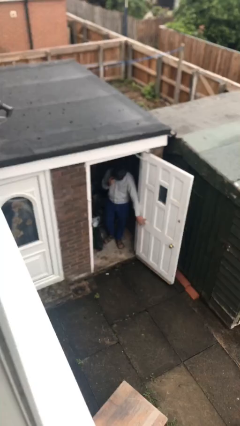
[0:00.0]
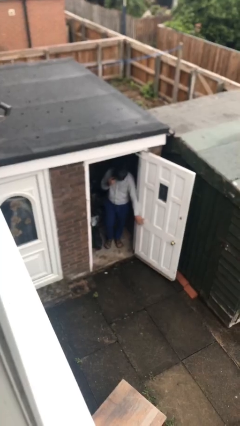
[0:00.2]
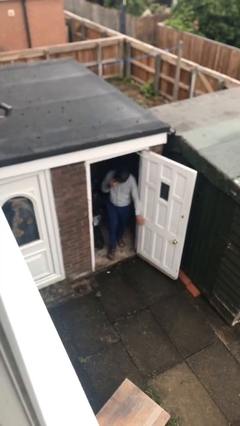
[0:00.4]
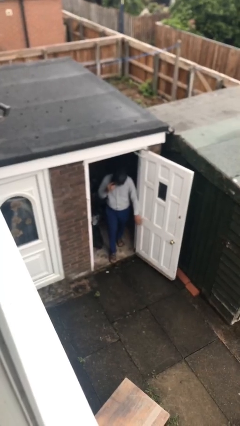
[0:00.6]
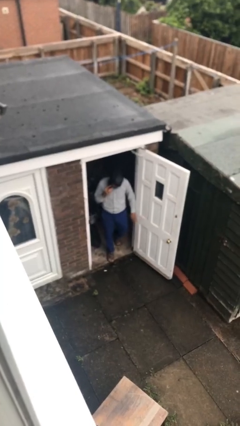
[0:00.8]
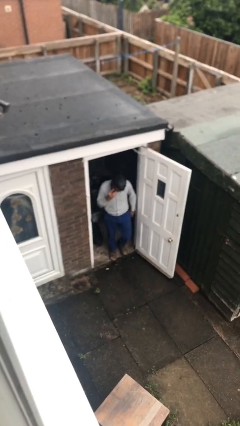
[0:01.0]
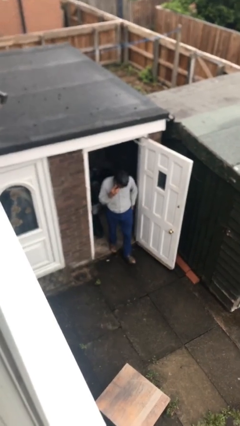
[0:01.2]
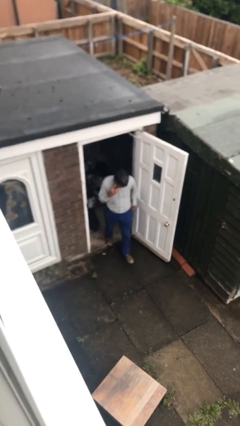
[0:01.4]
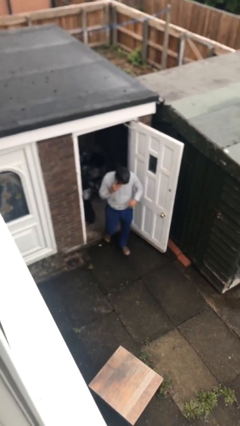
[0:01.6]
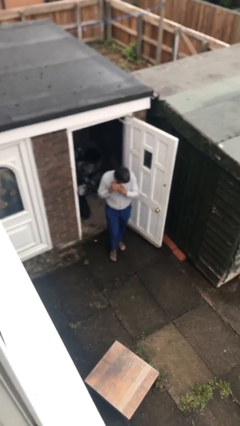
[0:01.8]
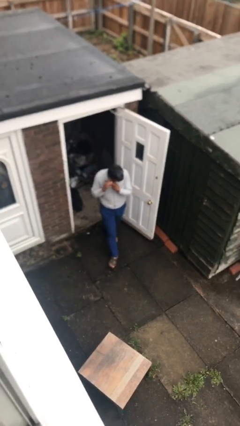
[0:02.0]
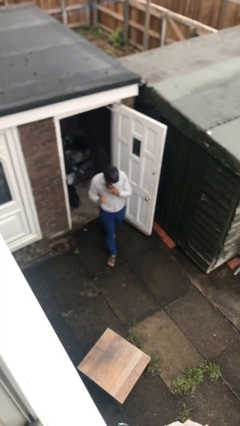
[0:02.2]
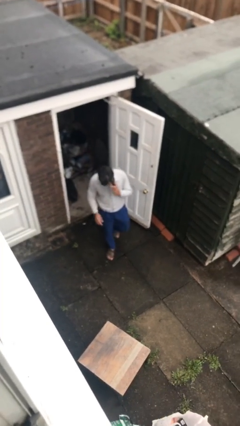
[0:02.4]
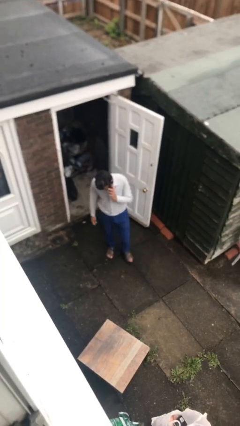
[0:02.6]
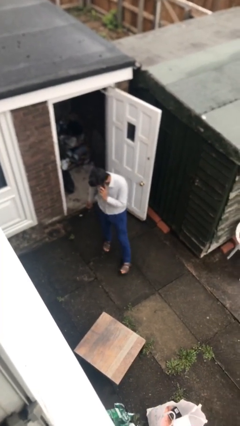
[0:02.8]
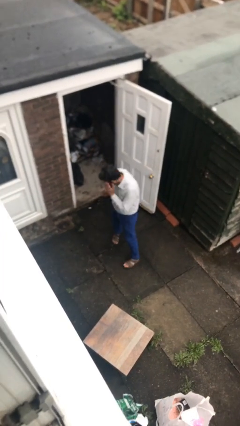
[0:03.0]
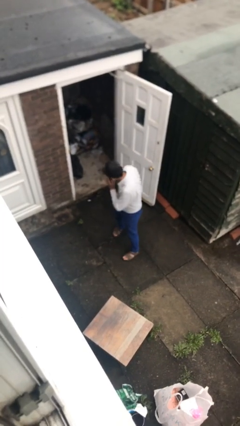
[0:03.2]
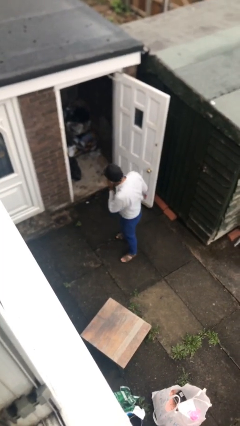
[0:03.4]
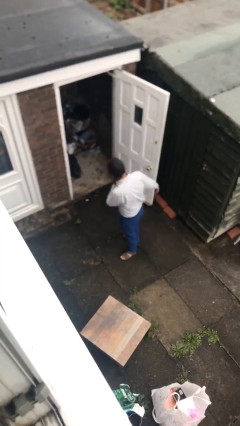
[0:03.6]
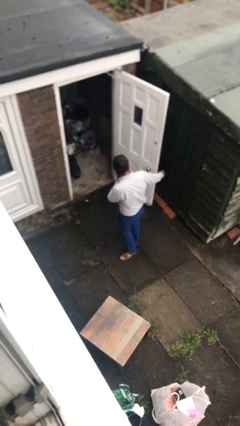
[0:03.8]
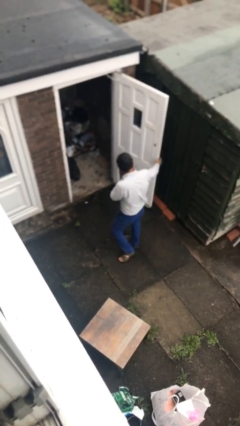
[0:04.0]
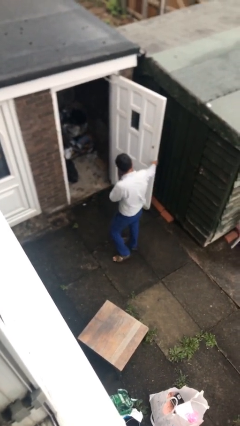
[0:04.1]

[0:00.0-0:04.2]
person enters scene through structure

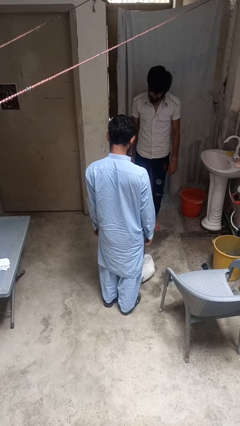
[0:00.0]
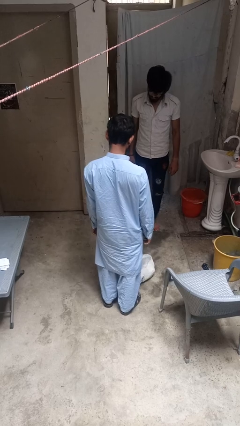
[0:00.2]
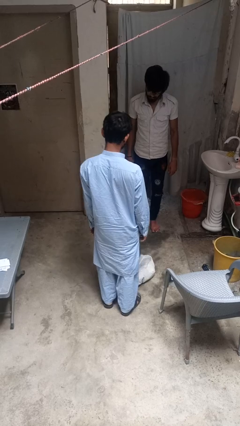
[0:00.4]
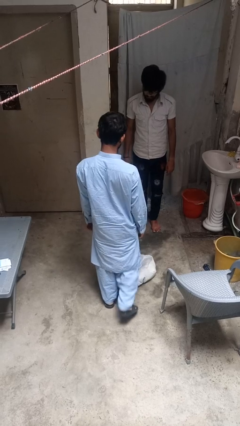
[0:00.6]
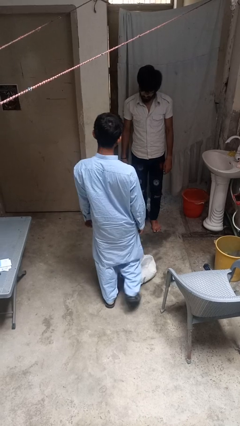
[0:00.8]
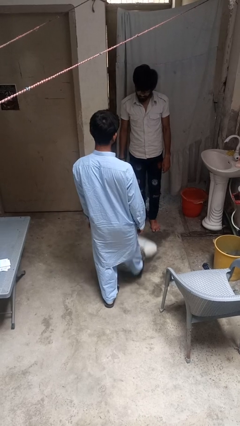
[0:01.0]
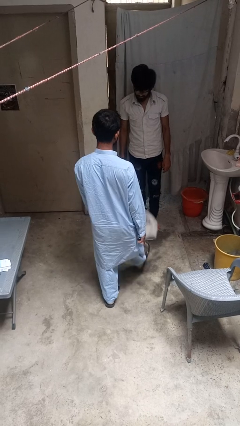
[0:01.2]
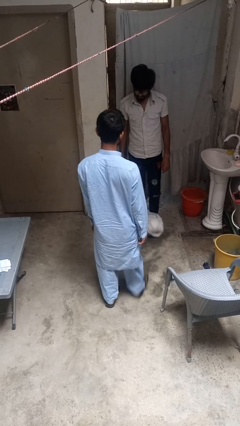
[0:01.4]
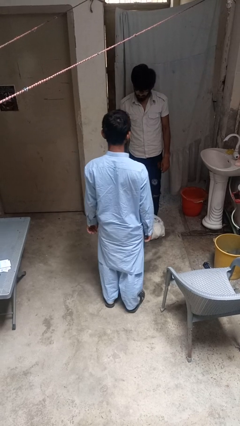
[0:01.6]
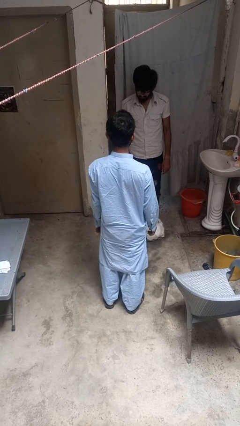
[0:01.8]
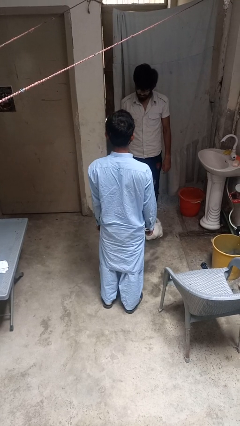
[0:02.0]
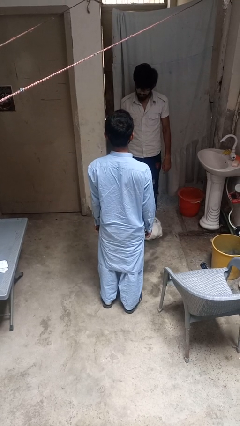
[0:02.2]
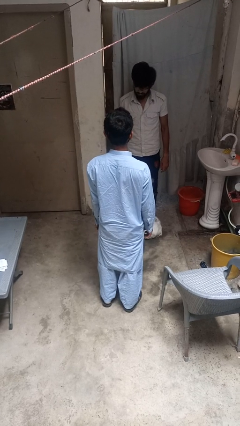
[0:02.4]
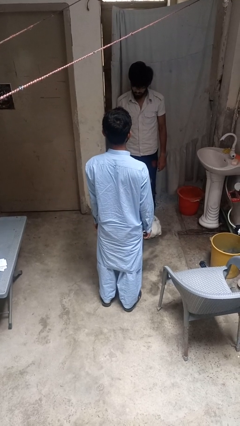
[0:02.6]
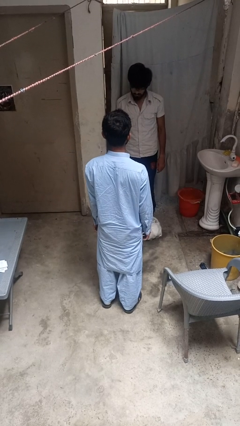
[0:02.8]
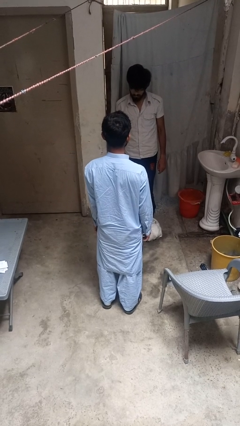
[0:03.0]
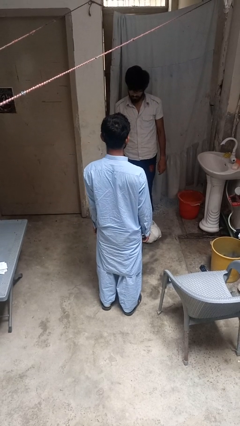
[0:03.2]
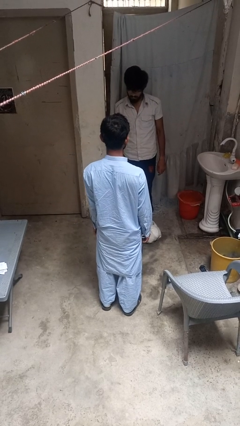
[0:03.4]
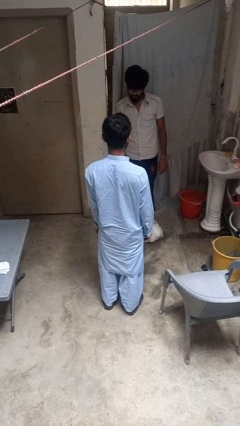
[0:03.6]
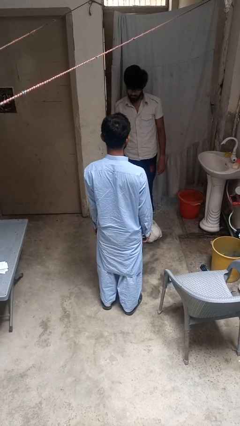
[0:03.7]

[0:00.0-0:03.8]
person kicks object to person

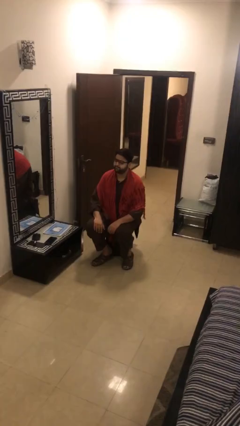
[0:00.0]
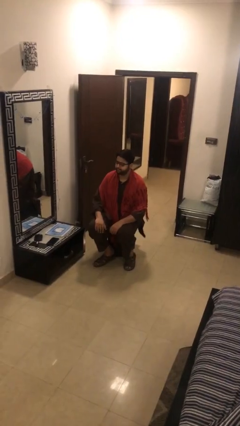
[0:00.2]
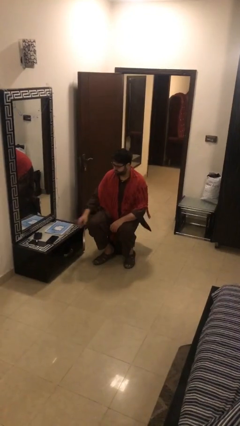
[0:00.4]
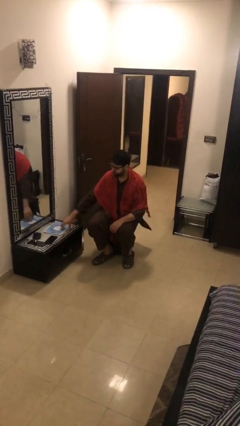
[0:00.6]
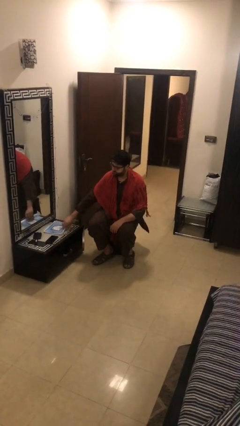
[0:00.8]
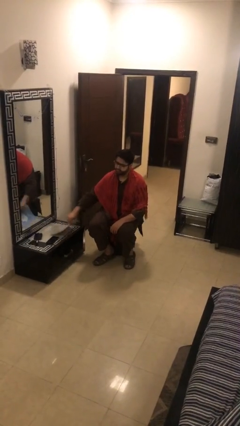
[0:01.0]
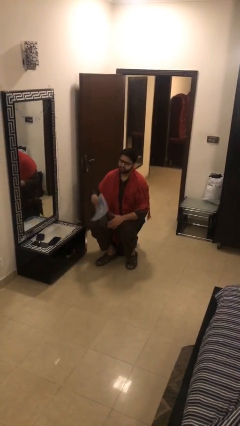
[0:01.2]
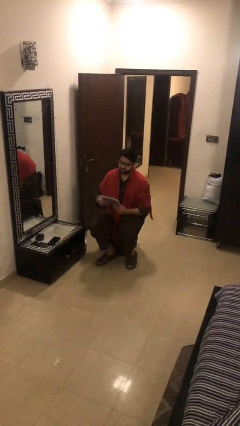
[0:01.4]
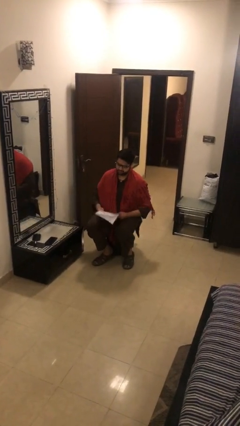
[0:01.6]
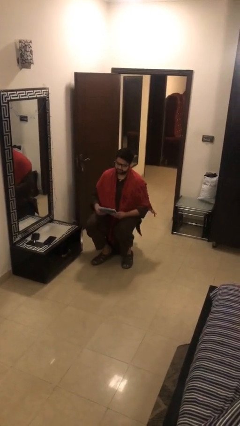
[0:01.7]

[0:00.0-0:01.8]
person picks up object from table

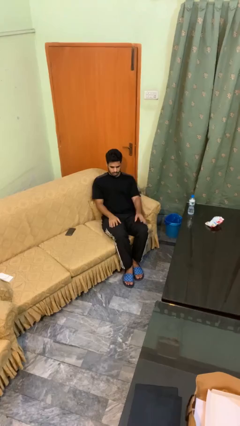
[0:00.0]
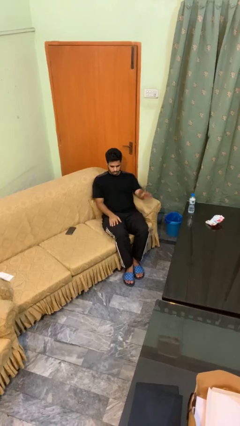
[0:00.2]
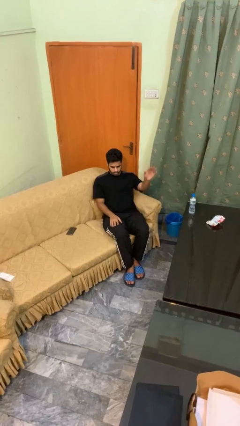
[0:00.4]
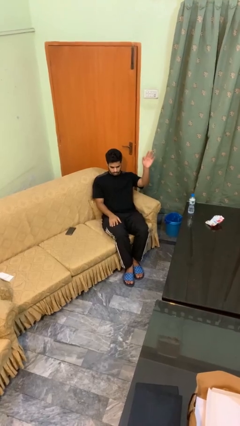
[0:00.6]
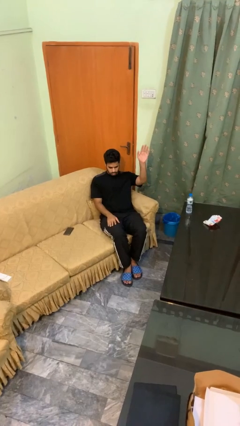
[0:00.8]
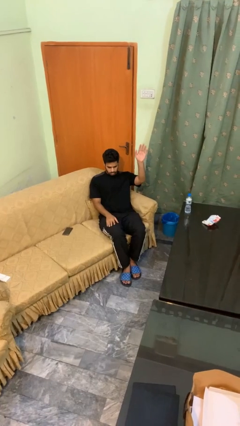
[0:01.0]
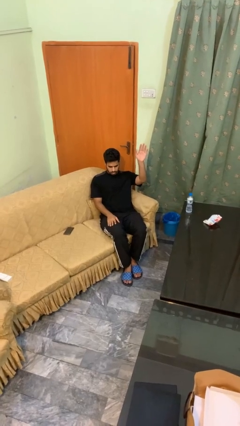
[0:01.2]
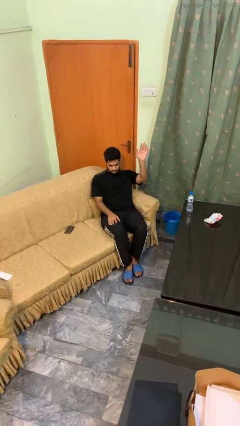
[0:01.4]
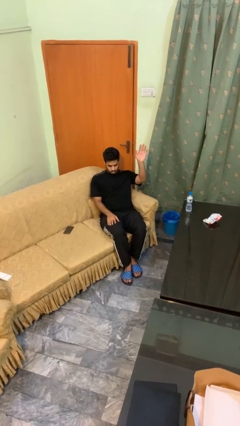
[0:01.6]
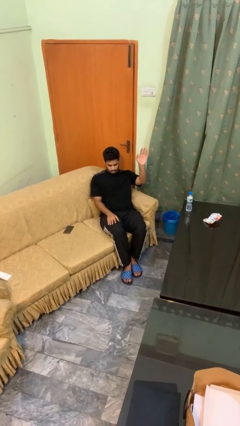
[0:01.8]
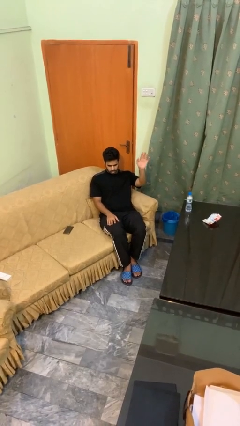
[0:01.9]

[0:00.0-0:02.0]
person gestures raise hand

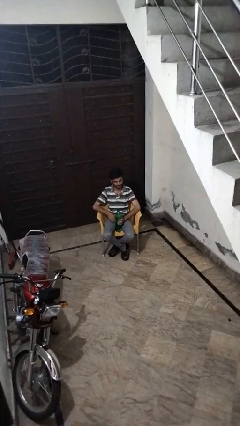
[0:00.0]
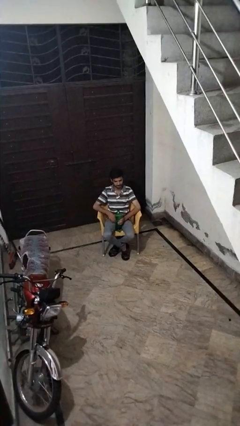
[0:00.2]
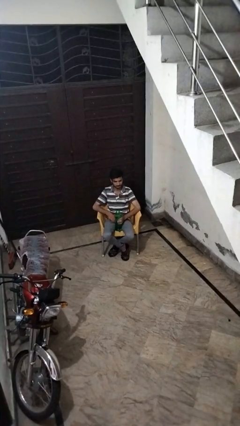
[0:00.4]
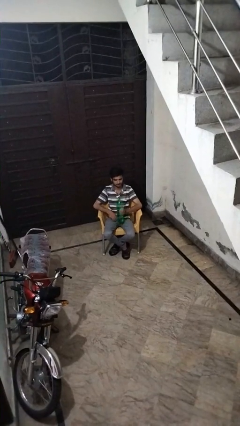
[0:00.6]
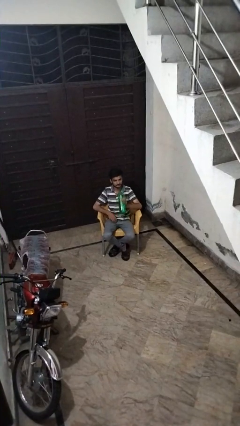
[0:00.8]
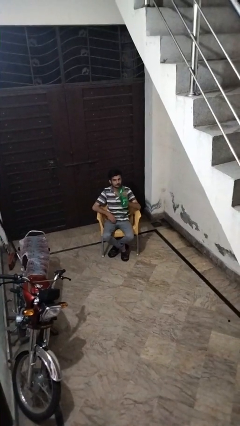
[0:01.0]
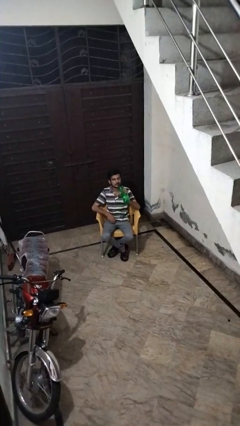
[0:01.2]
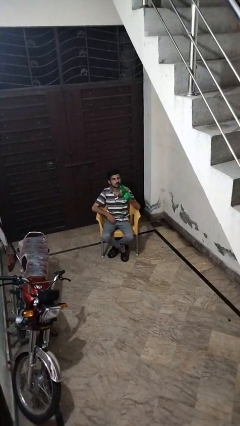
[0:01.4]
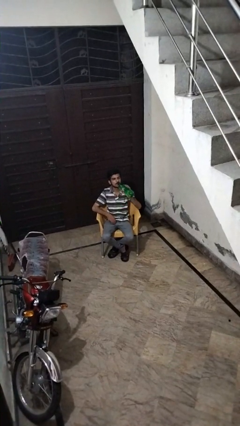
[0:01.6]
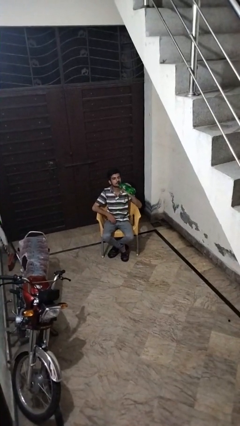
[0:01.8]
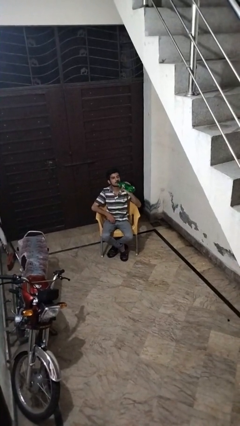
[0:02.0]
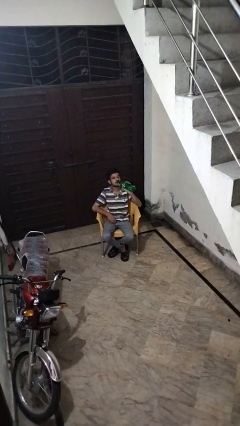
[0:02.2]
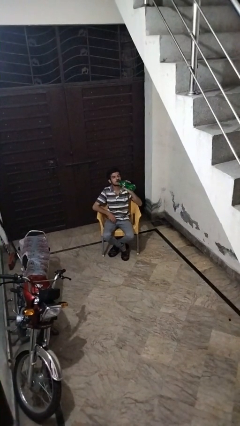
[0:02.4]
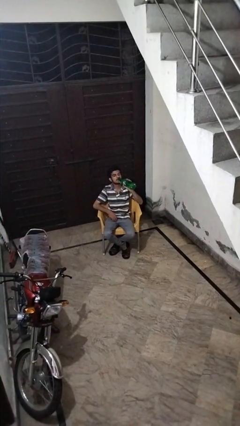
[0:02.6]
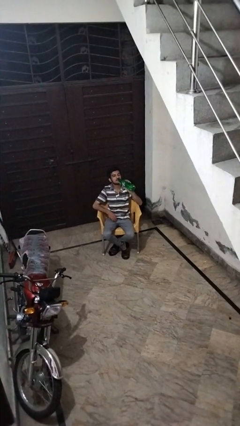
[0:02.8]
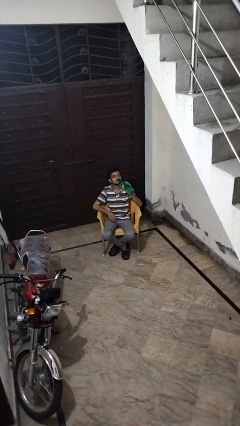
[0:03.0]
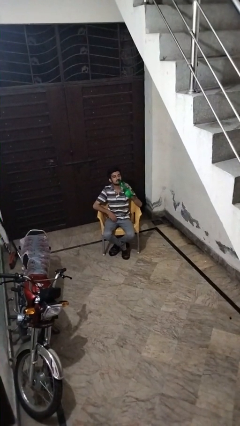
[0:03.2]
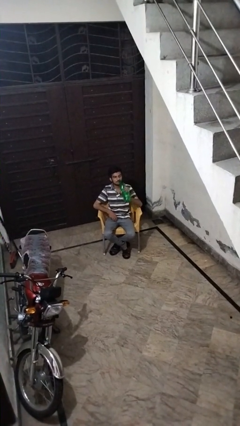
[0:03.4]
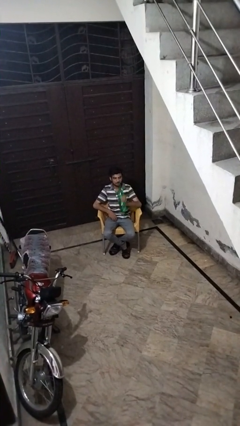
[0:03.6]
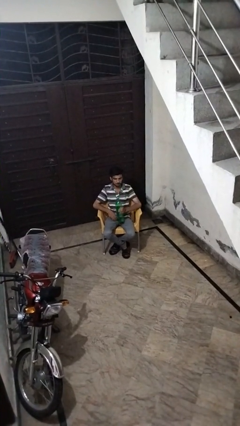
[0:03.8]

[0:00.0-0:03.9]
person drinks from bottle

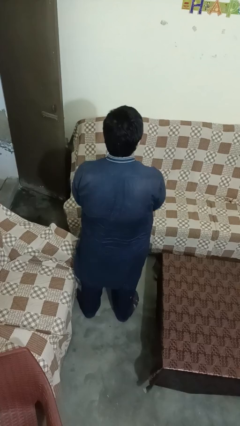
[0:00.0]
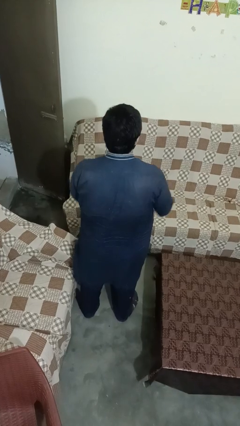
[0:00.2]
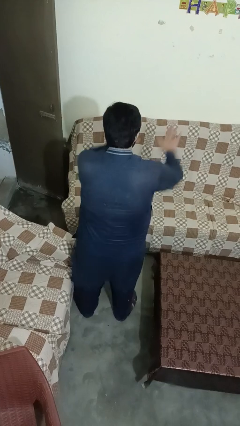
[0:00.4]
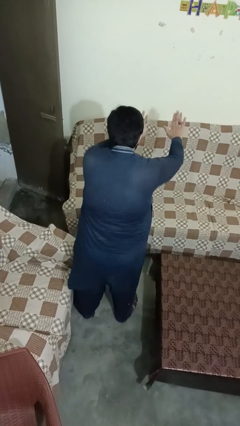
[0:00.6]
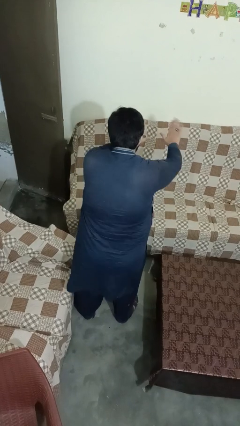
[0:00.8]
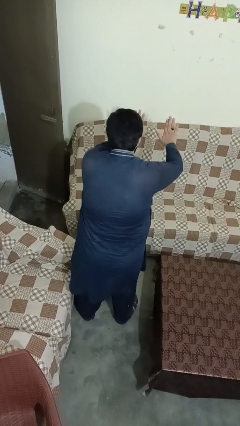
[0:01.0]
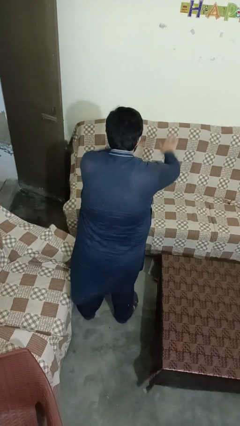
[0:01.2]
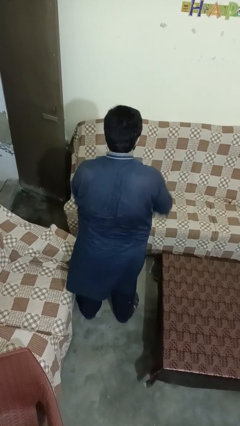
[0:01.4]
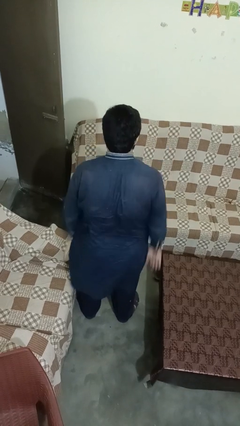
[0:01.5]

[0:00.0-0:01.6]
person gestures stop
